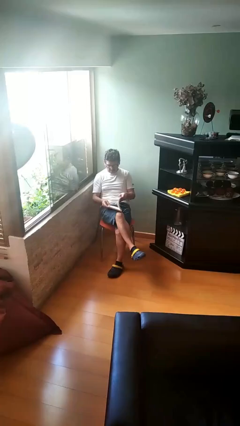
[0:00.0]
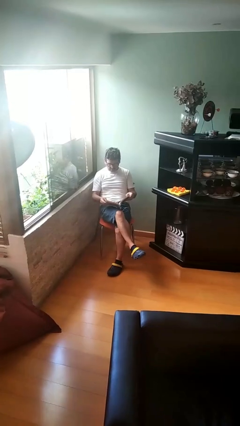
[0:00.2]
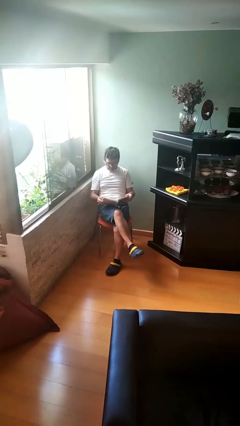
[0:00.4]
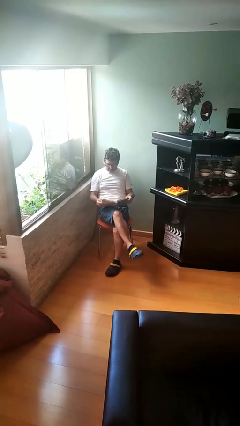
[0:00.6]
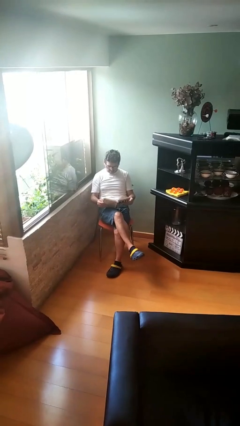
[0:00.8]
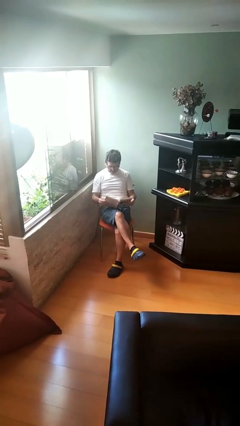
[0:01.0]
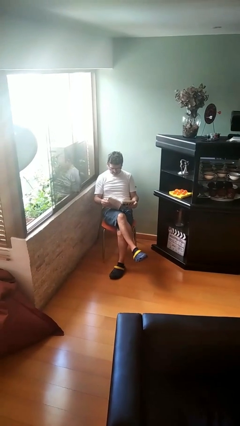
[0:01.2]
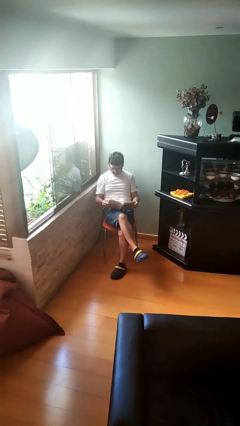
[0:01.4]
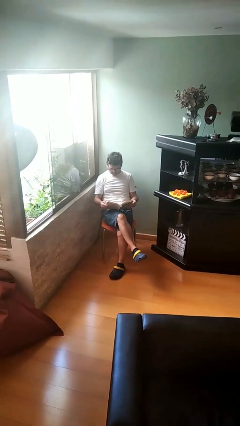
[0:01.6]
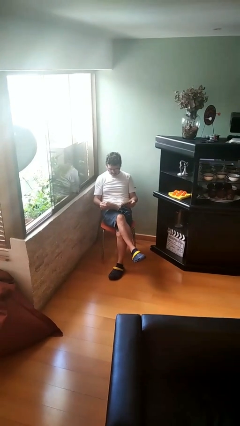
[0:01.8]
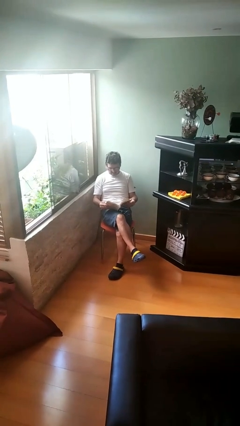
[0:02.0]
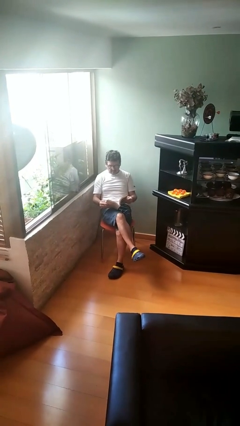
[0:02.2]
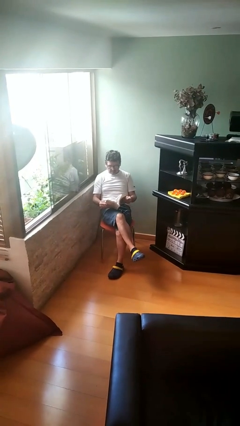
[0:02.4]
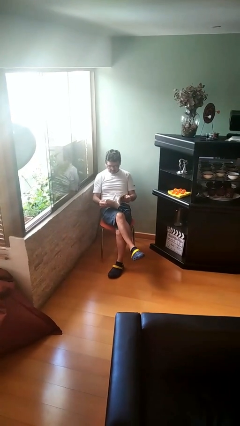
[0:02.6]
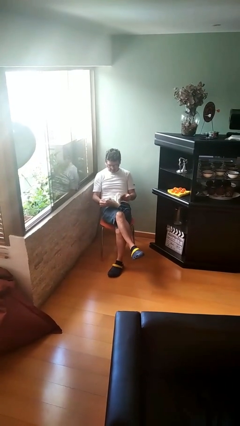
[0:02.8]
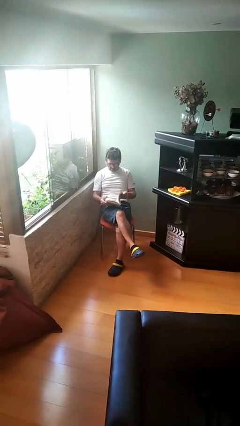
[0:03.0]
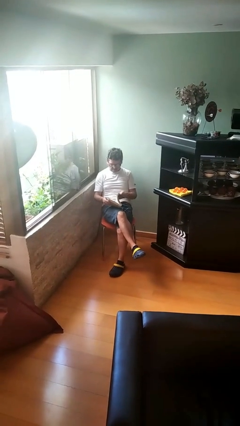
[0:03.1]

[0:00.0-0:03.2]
person reads document

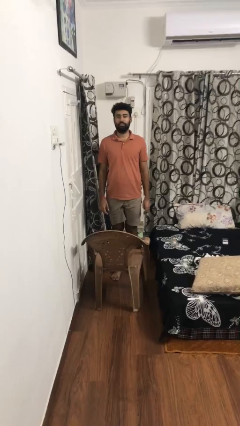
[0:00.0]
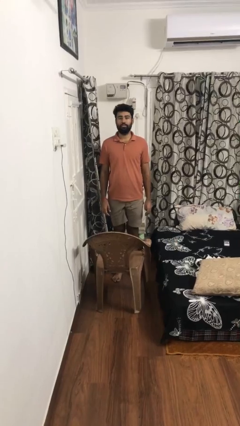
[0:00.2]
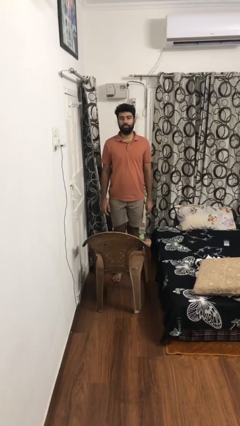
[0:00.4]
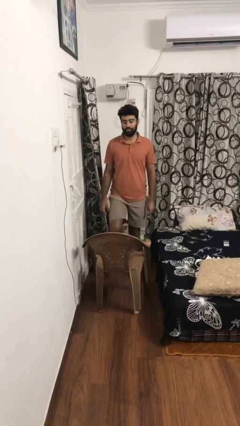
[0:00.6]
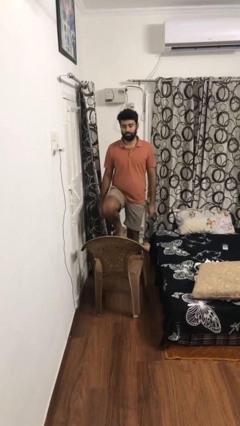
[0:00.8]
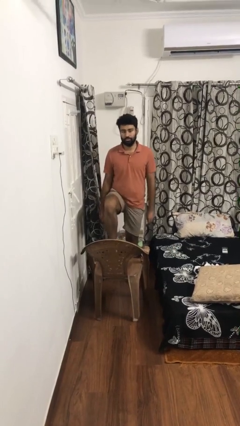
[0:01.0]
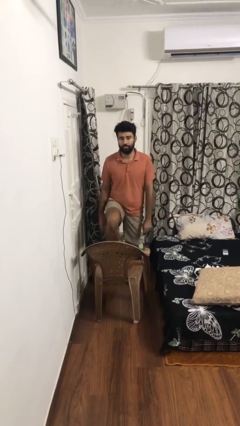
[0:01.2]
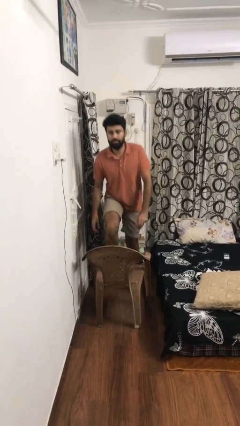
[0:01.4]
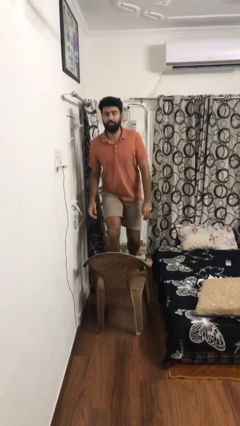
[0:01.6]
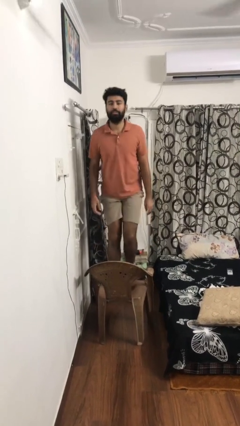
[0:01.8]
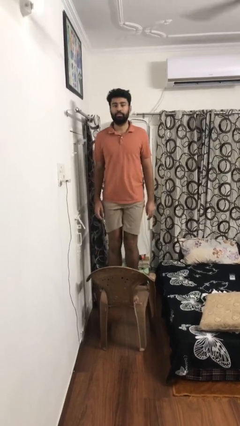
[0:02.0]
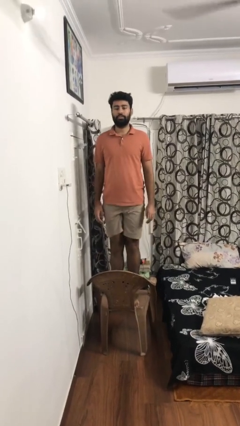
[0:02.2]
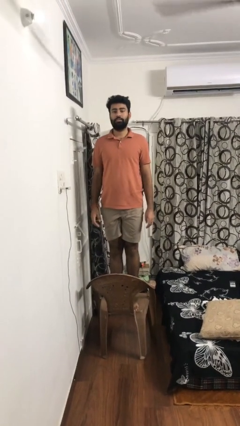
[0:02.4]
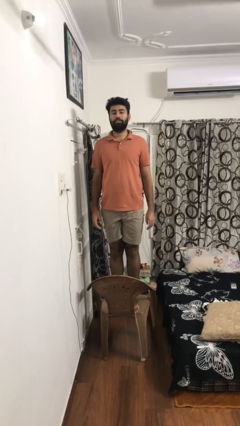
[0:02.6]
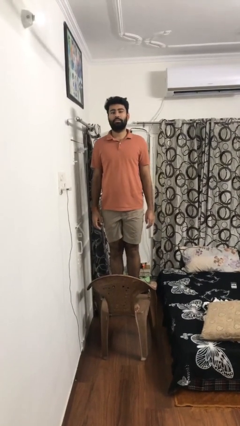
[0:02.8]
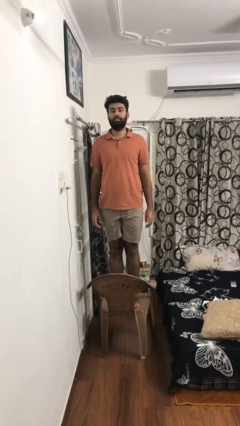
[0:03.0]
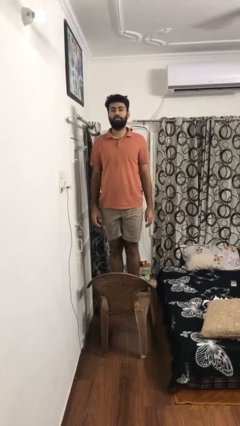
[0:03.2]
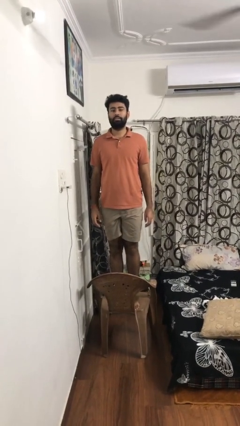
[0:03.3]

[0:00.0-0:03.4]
person climbs on chair

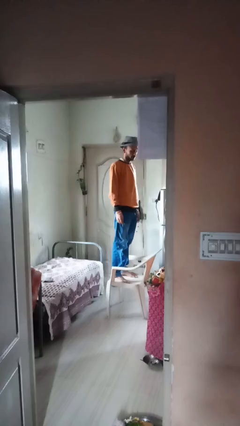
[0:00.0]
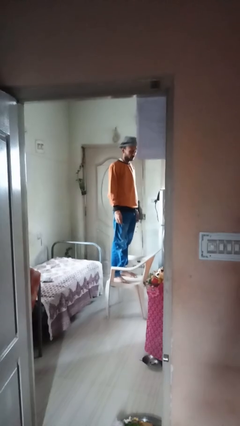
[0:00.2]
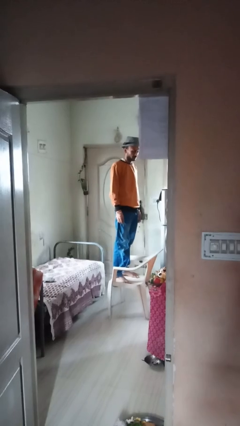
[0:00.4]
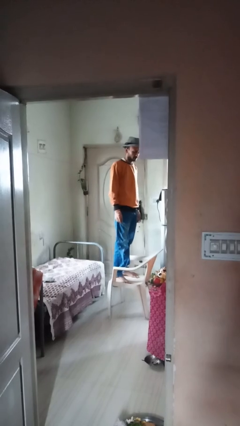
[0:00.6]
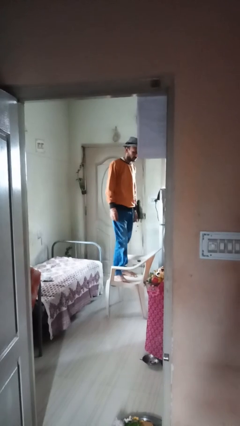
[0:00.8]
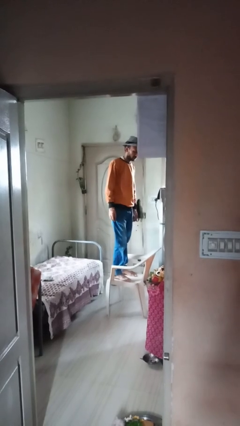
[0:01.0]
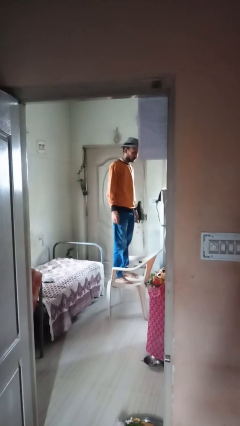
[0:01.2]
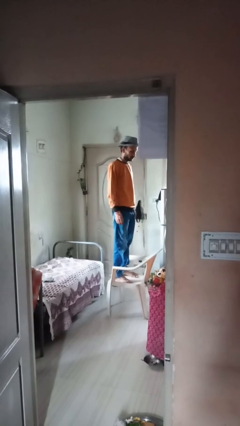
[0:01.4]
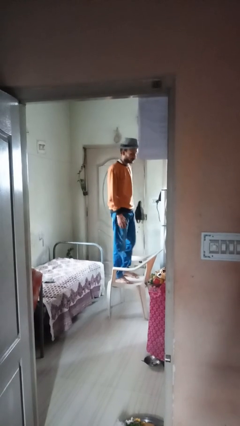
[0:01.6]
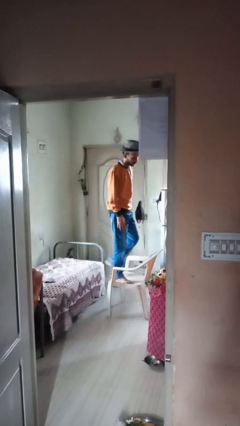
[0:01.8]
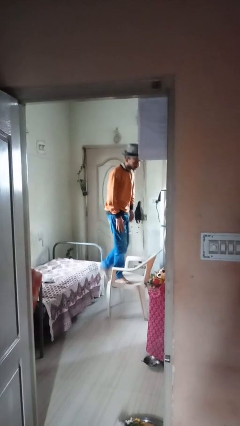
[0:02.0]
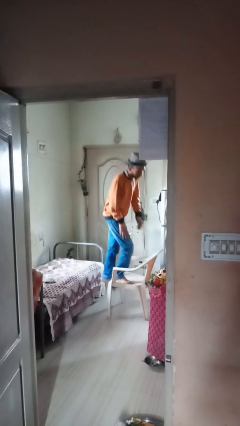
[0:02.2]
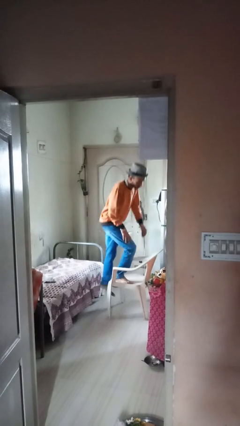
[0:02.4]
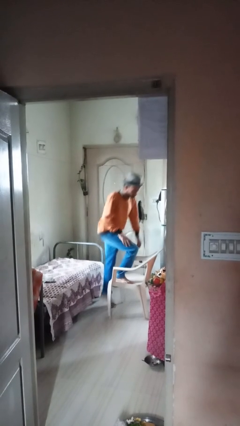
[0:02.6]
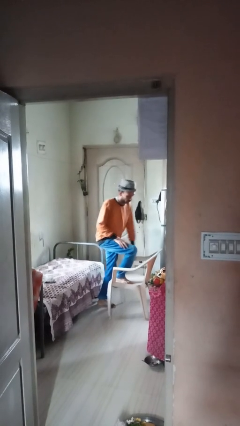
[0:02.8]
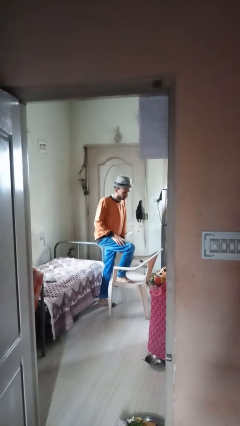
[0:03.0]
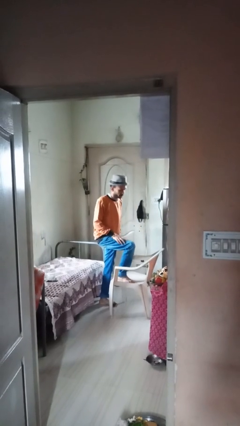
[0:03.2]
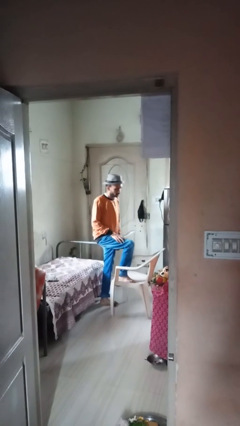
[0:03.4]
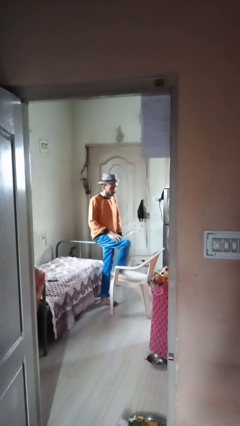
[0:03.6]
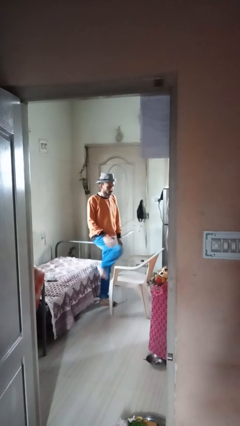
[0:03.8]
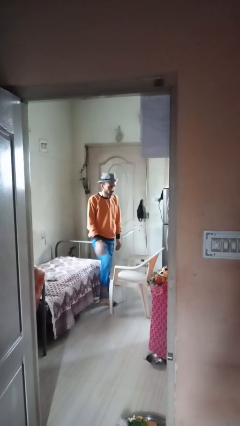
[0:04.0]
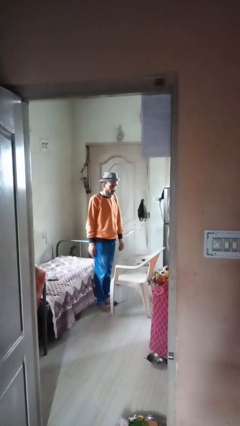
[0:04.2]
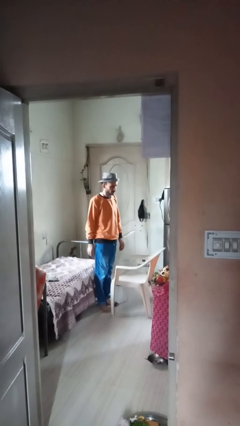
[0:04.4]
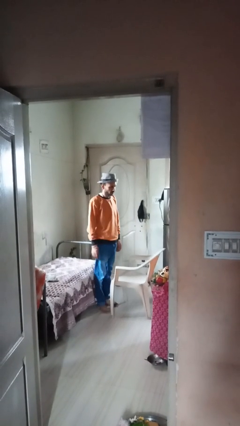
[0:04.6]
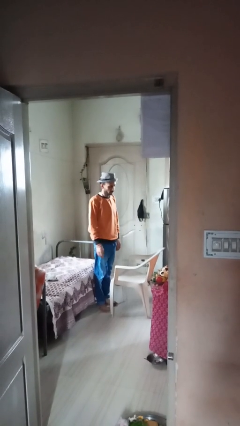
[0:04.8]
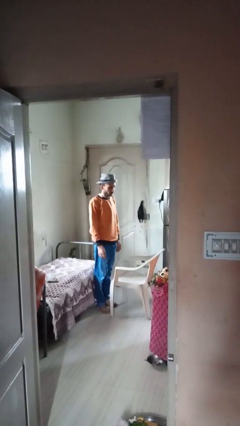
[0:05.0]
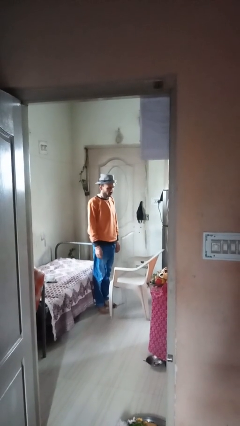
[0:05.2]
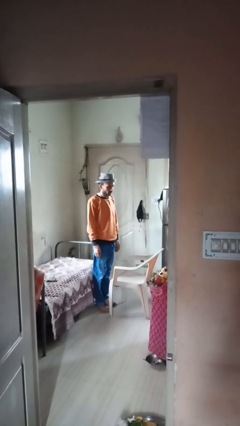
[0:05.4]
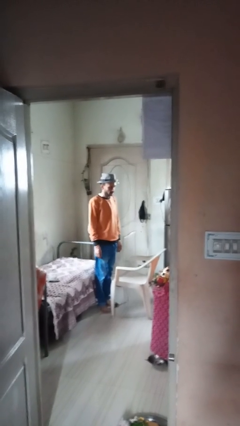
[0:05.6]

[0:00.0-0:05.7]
person climbs off chair

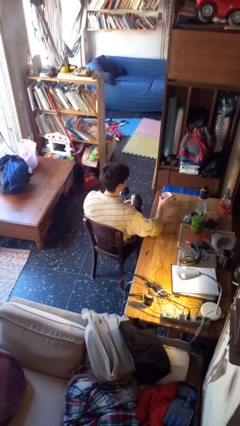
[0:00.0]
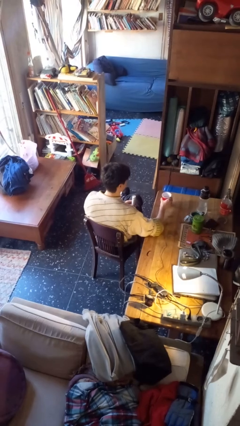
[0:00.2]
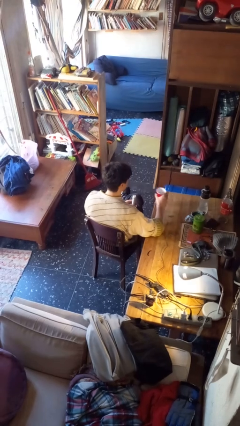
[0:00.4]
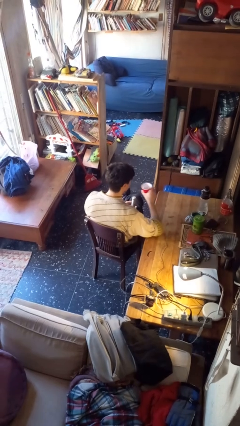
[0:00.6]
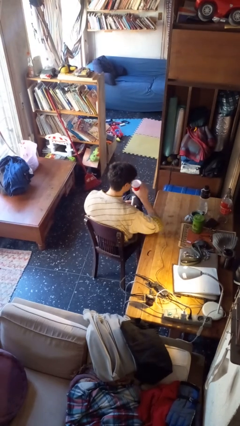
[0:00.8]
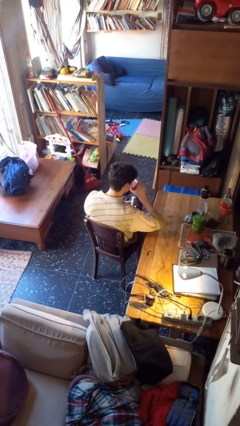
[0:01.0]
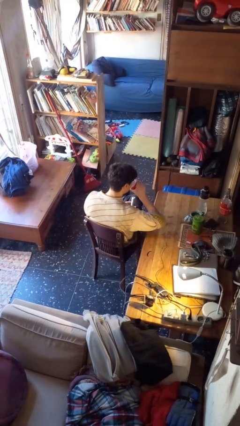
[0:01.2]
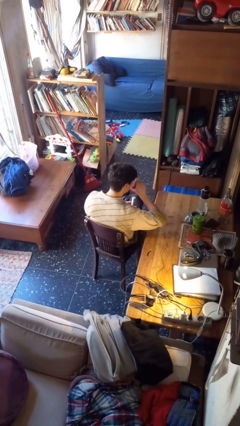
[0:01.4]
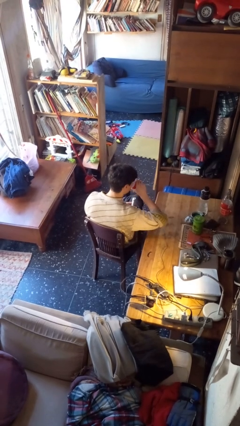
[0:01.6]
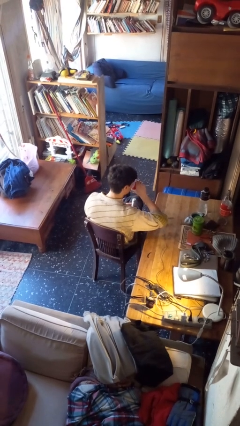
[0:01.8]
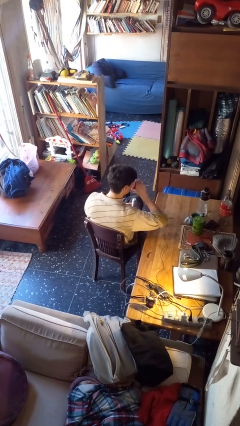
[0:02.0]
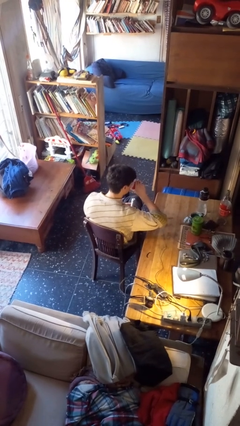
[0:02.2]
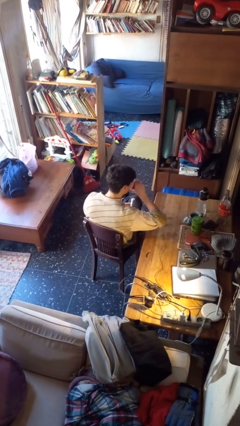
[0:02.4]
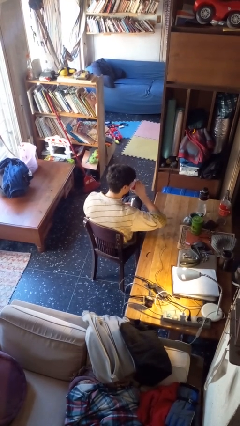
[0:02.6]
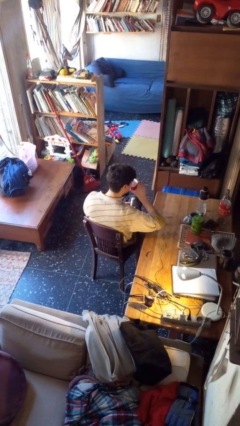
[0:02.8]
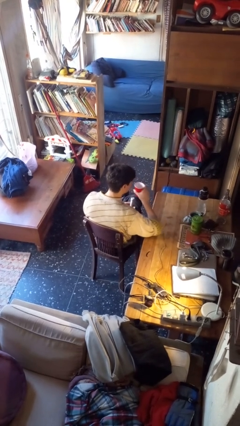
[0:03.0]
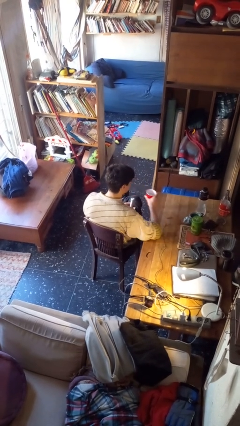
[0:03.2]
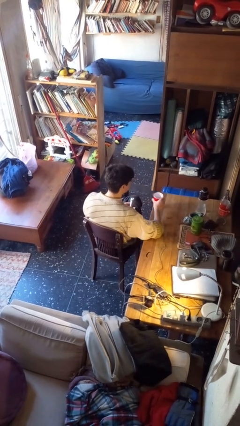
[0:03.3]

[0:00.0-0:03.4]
person drinks from cup

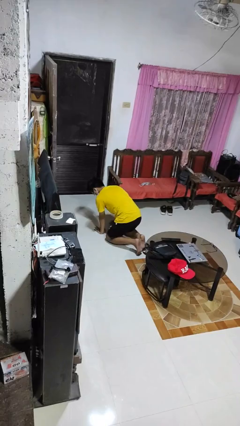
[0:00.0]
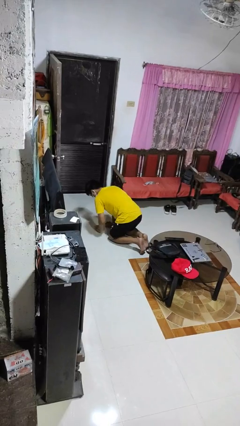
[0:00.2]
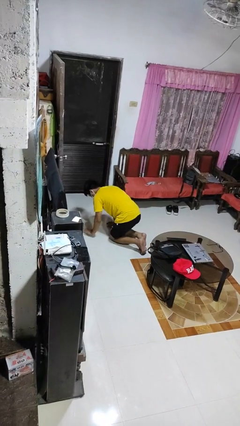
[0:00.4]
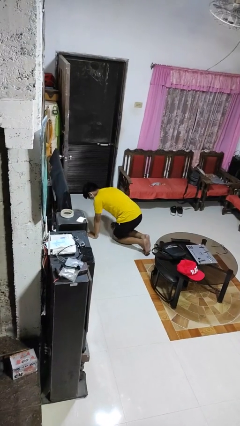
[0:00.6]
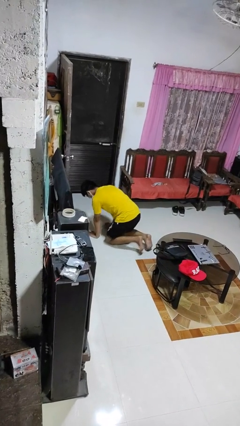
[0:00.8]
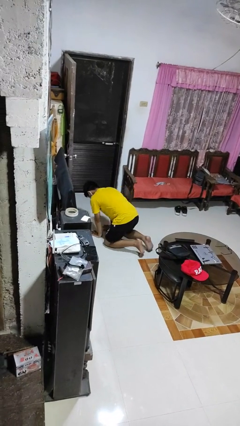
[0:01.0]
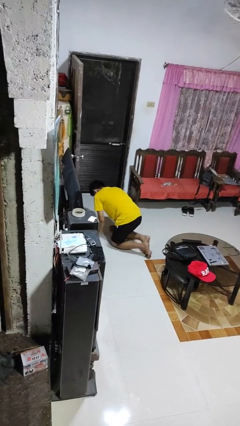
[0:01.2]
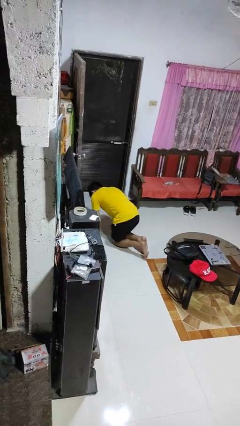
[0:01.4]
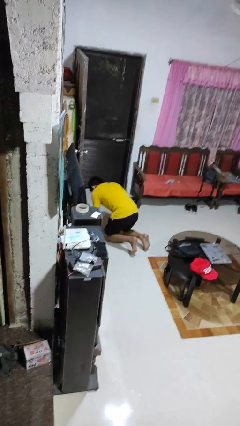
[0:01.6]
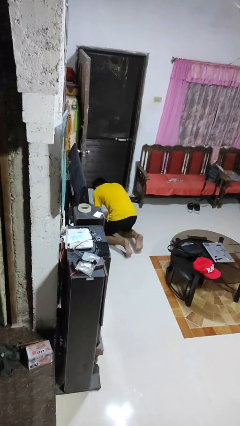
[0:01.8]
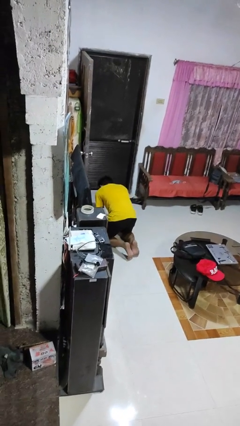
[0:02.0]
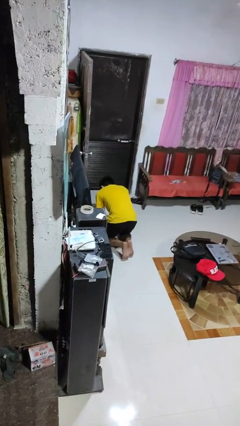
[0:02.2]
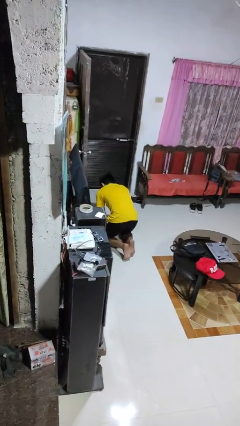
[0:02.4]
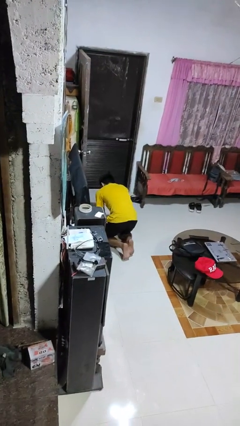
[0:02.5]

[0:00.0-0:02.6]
person crawls
